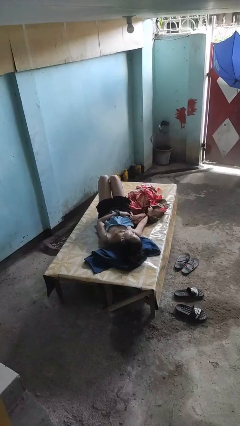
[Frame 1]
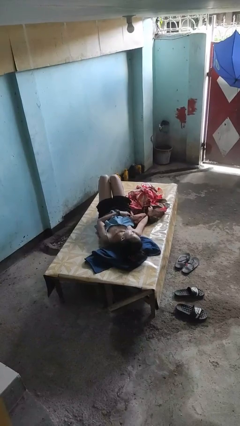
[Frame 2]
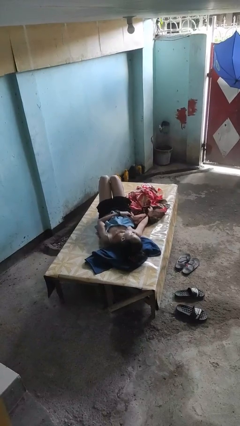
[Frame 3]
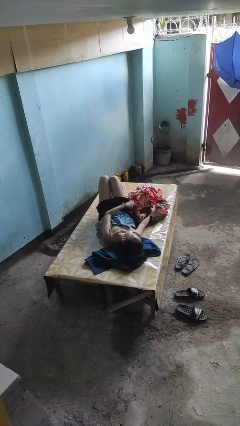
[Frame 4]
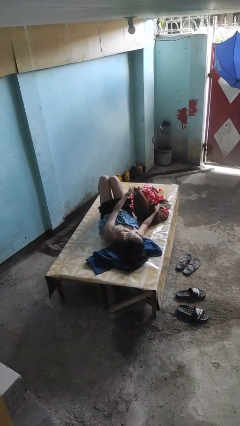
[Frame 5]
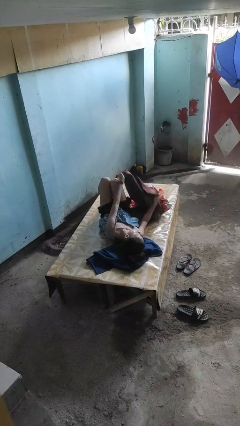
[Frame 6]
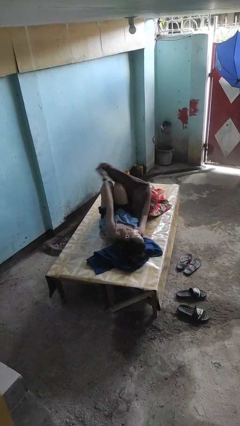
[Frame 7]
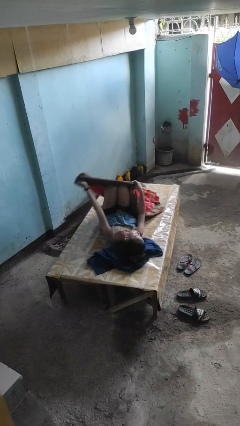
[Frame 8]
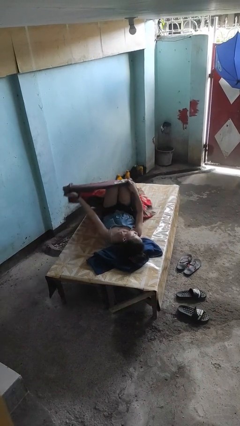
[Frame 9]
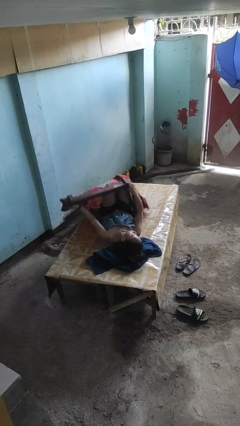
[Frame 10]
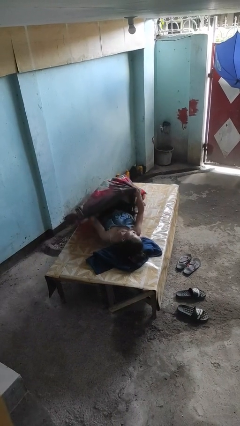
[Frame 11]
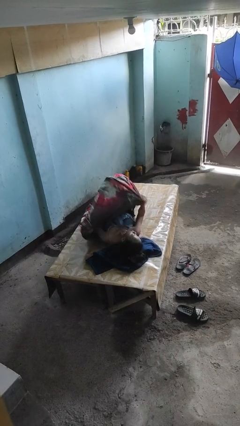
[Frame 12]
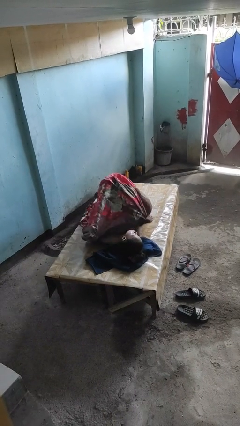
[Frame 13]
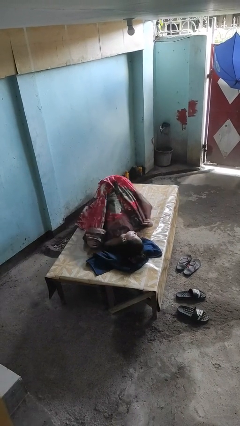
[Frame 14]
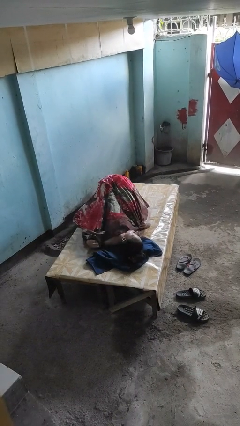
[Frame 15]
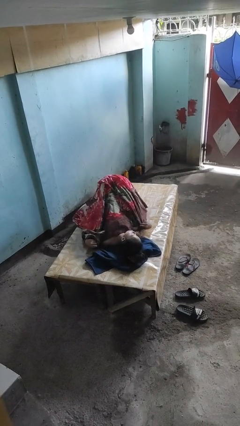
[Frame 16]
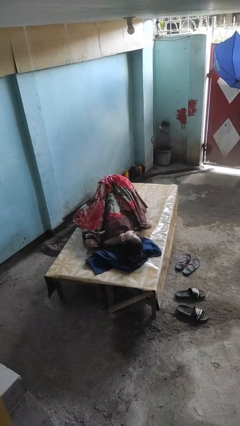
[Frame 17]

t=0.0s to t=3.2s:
person covers with blanket

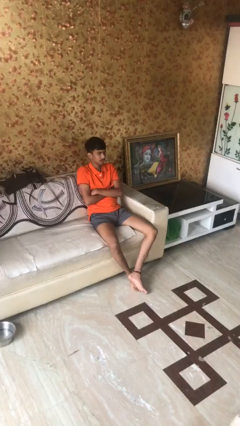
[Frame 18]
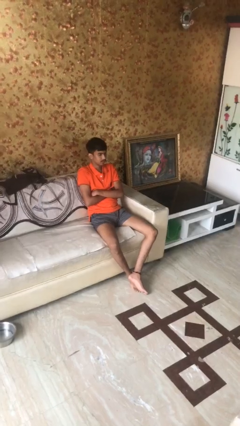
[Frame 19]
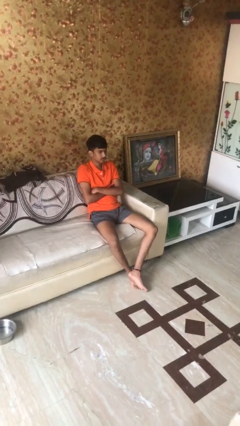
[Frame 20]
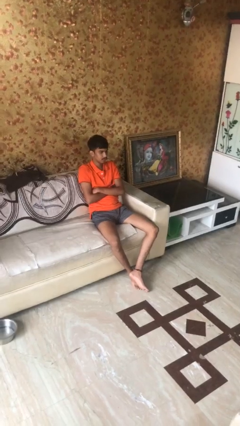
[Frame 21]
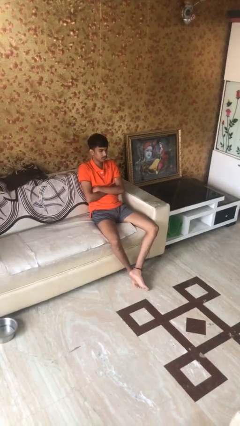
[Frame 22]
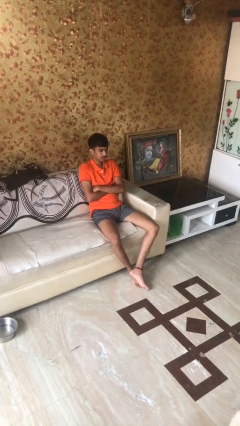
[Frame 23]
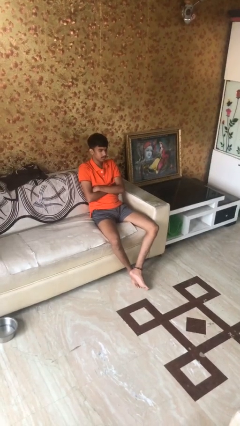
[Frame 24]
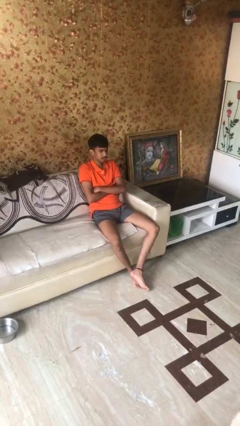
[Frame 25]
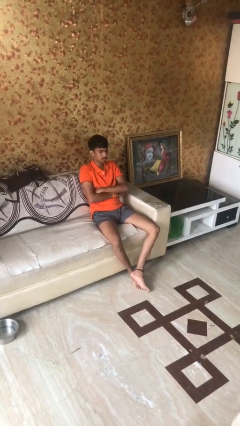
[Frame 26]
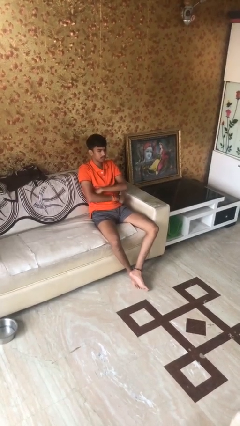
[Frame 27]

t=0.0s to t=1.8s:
person crosses arms

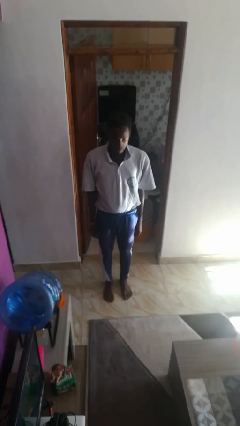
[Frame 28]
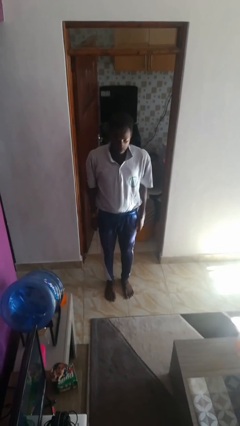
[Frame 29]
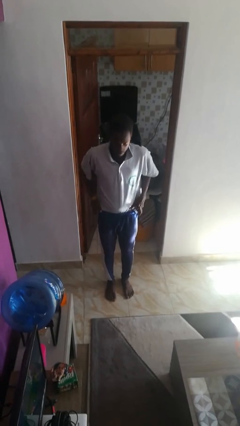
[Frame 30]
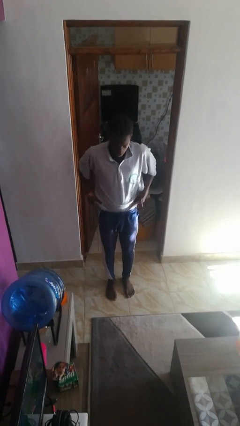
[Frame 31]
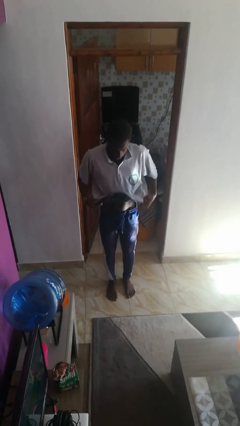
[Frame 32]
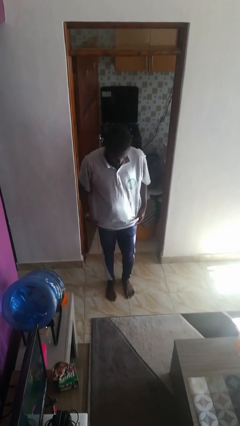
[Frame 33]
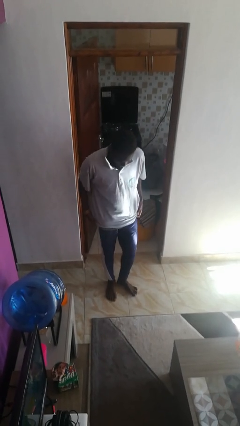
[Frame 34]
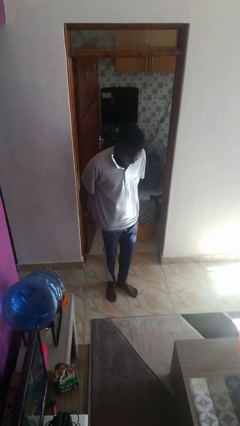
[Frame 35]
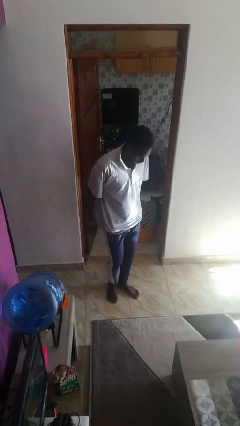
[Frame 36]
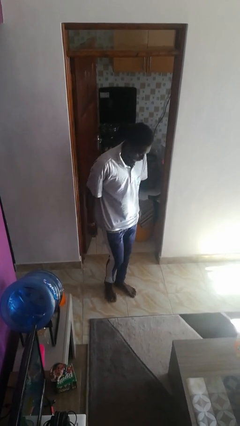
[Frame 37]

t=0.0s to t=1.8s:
person untucks shirt

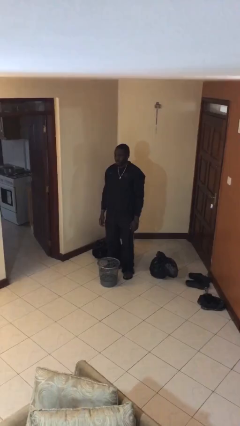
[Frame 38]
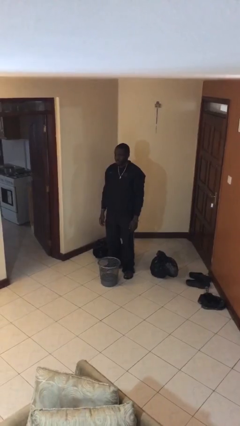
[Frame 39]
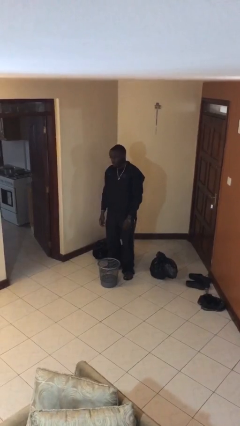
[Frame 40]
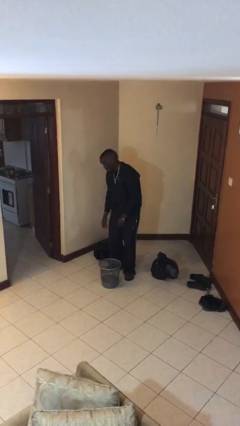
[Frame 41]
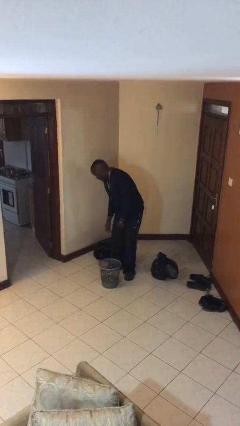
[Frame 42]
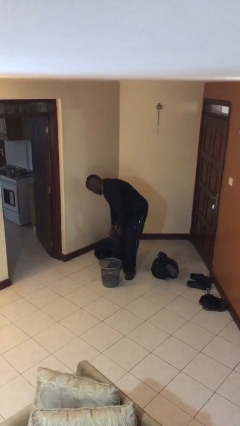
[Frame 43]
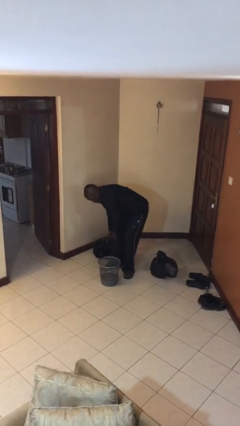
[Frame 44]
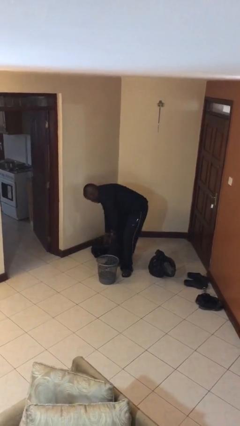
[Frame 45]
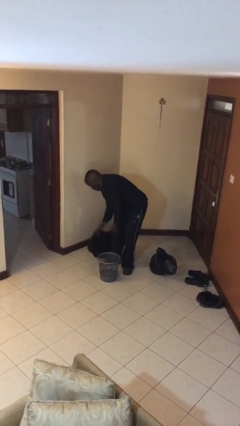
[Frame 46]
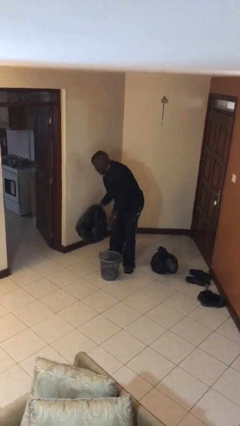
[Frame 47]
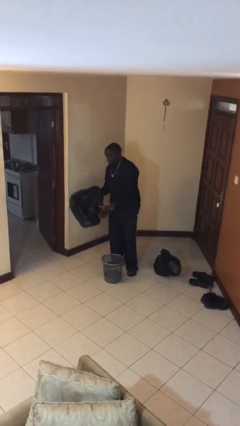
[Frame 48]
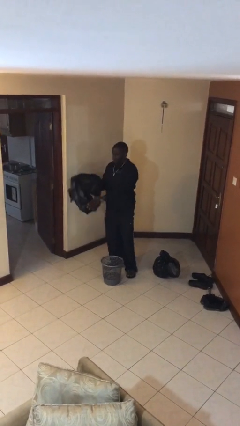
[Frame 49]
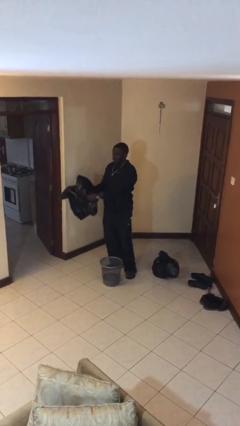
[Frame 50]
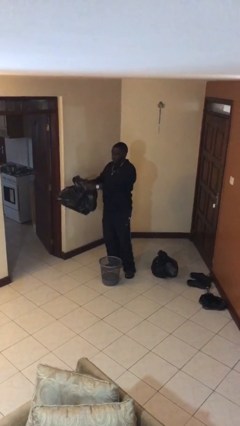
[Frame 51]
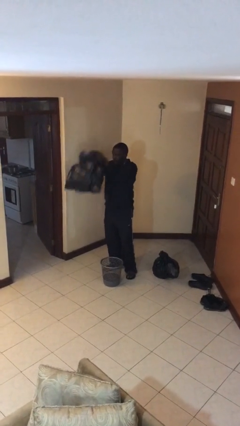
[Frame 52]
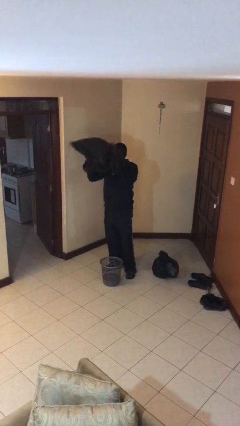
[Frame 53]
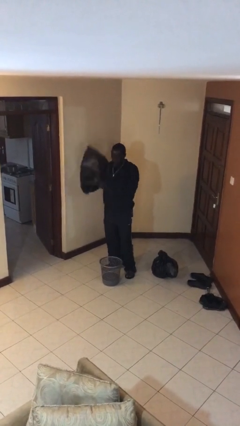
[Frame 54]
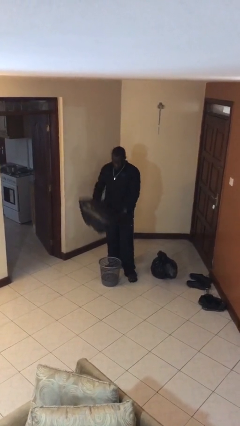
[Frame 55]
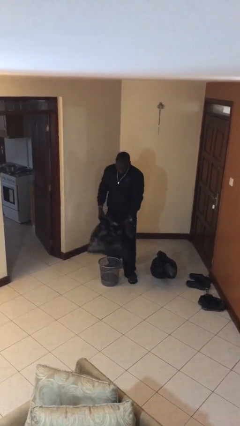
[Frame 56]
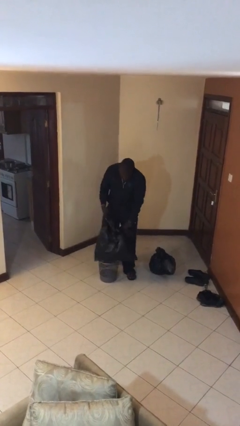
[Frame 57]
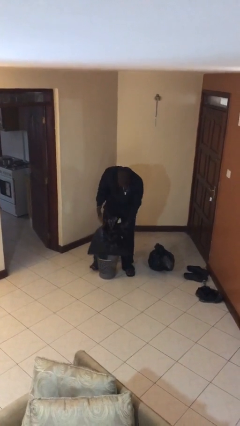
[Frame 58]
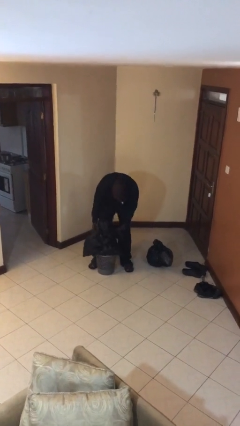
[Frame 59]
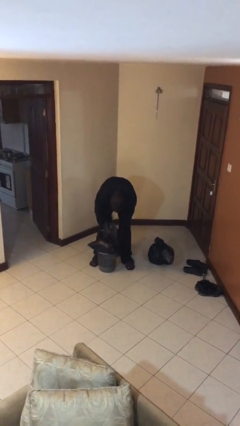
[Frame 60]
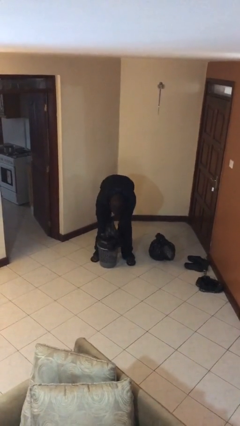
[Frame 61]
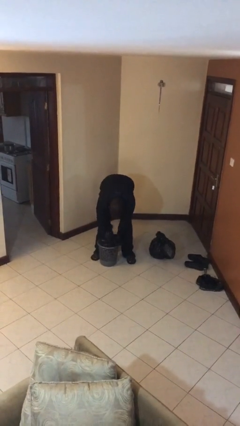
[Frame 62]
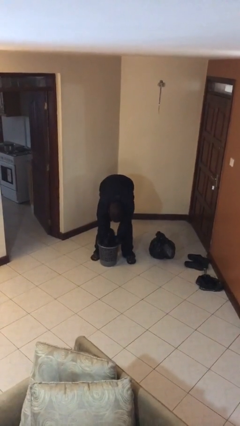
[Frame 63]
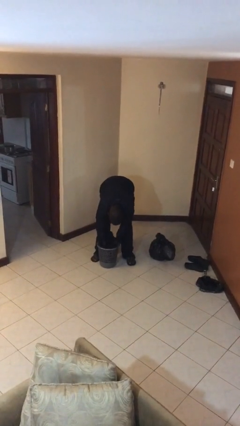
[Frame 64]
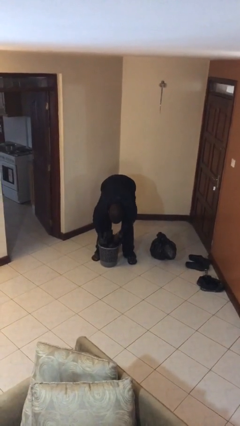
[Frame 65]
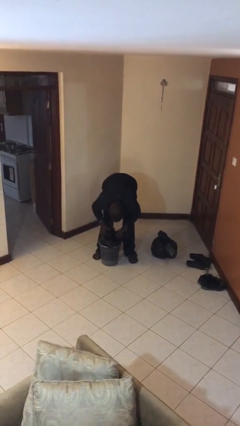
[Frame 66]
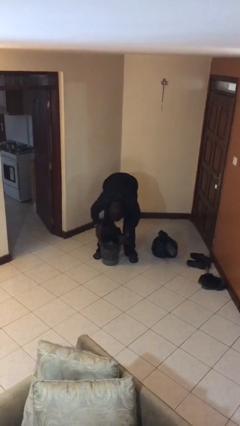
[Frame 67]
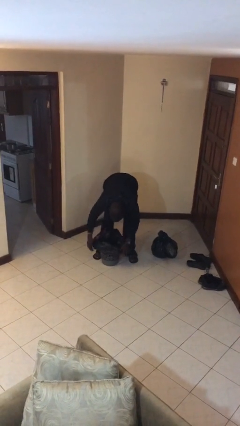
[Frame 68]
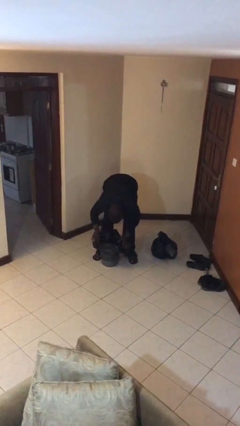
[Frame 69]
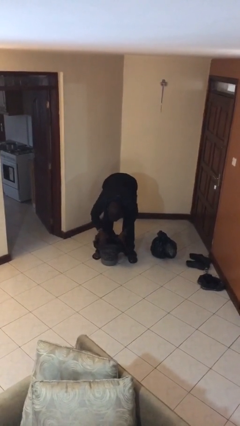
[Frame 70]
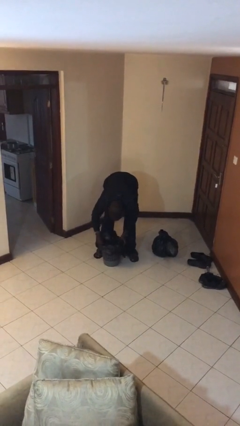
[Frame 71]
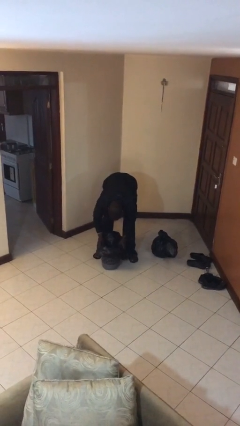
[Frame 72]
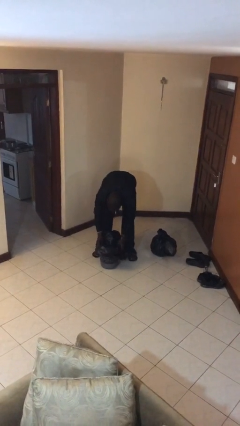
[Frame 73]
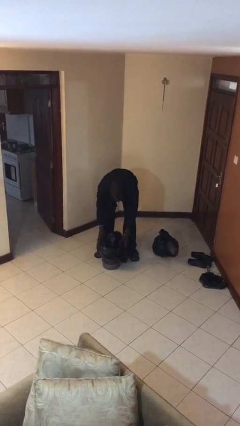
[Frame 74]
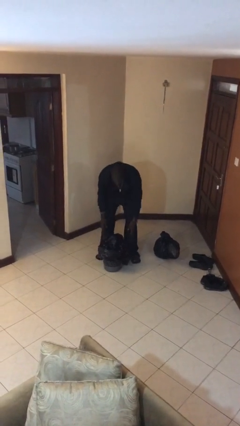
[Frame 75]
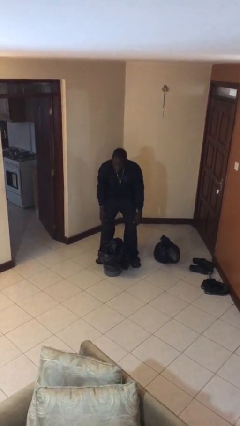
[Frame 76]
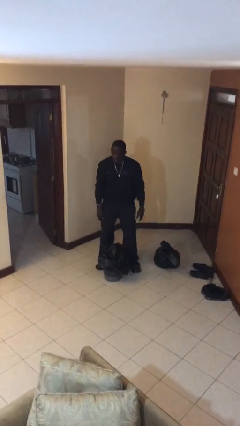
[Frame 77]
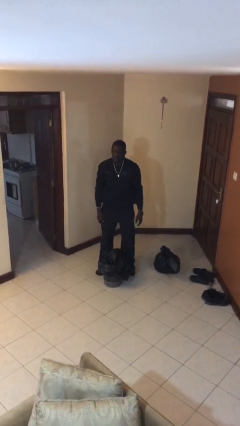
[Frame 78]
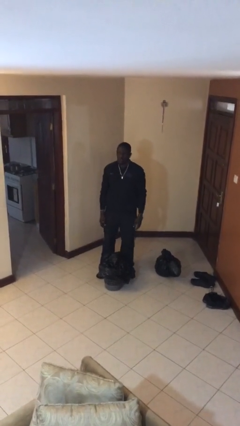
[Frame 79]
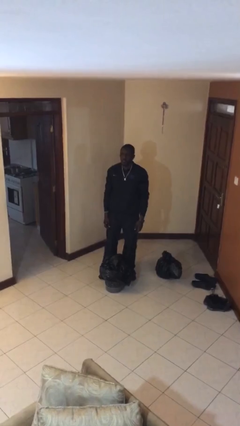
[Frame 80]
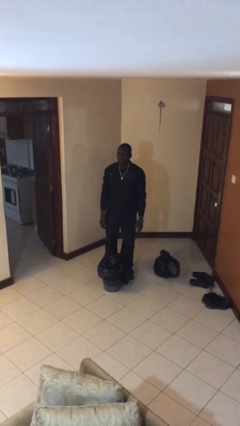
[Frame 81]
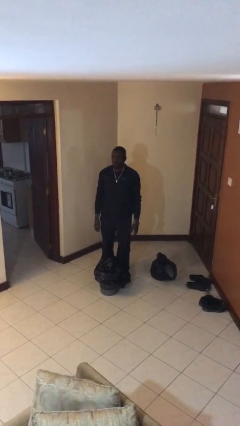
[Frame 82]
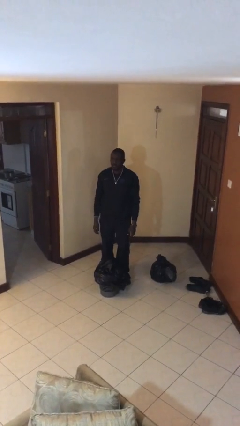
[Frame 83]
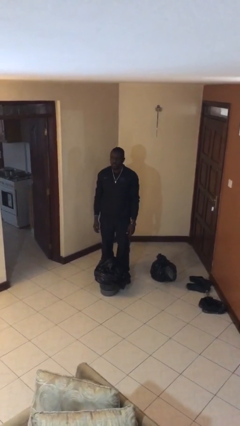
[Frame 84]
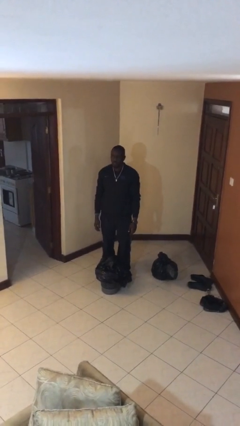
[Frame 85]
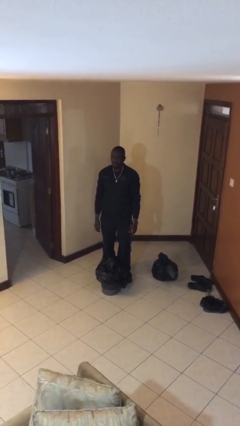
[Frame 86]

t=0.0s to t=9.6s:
person inserts trashbag into trashcan

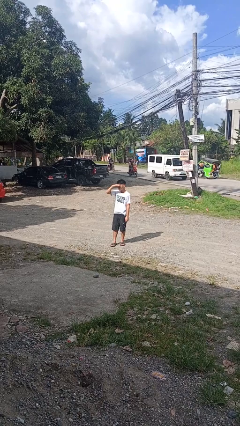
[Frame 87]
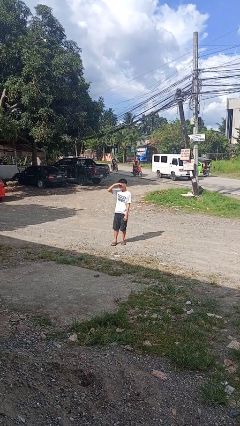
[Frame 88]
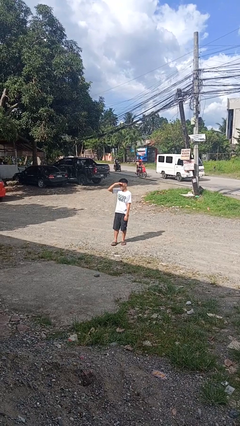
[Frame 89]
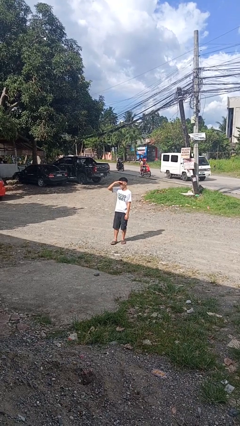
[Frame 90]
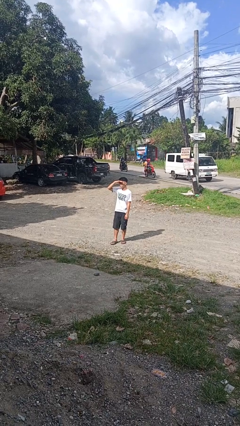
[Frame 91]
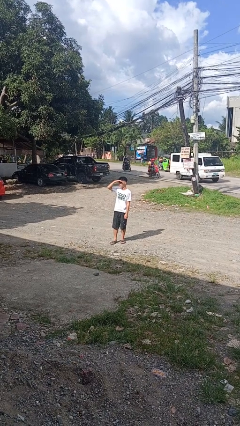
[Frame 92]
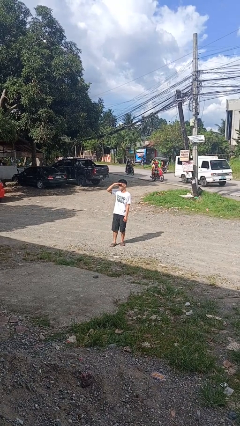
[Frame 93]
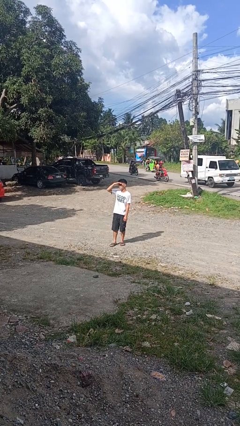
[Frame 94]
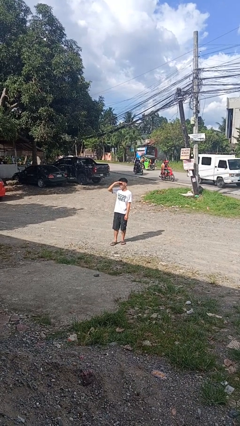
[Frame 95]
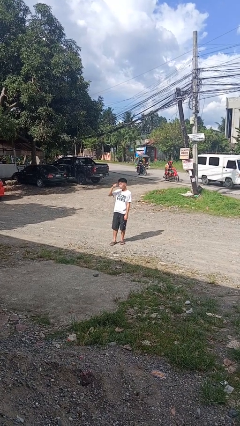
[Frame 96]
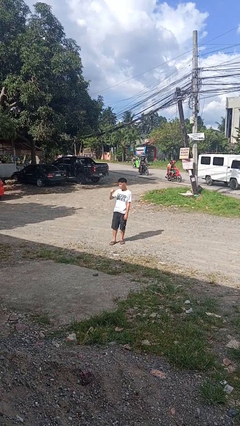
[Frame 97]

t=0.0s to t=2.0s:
person shades eyes
